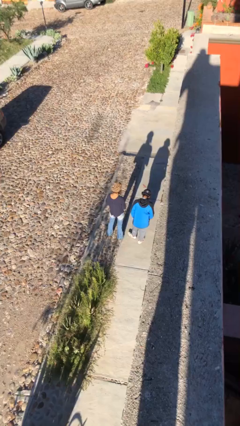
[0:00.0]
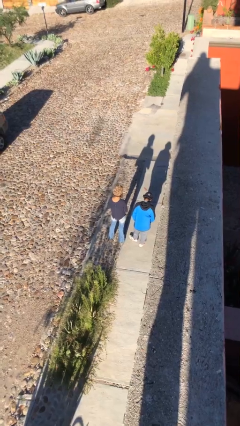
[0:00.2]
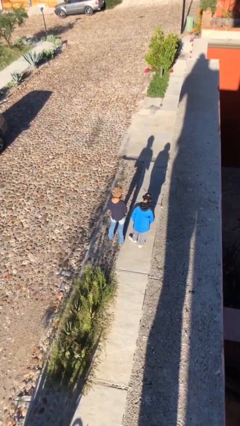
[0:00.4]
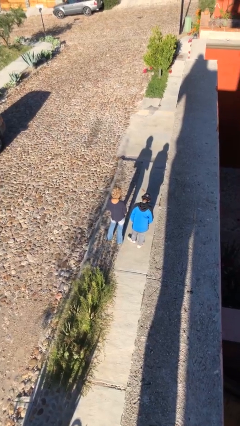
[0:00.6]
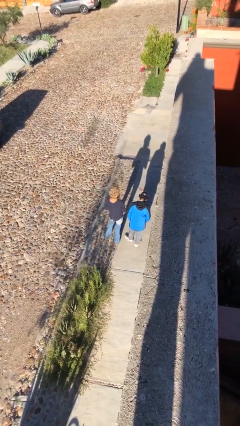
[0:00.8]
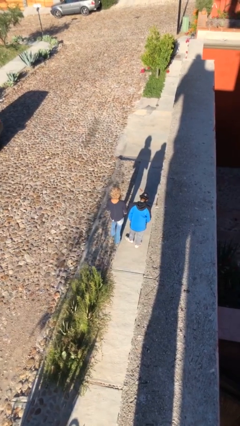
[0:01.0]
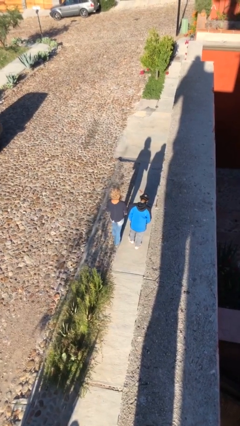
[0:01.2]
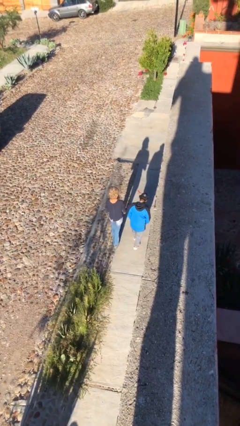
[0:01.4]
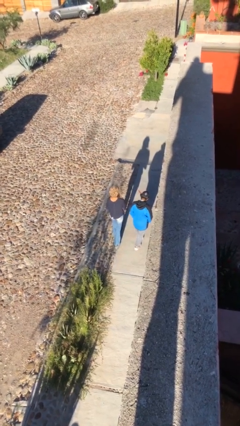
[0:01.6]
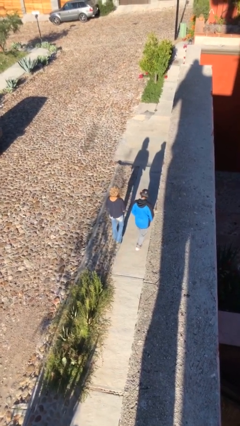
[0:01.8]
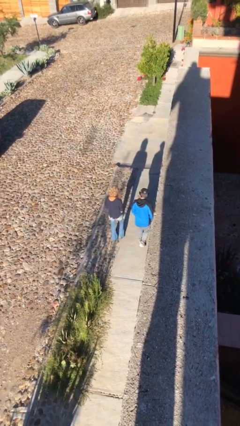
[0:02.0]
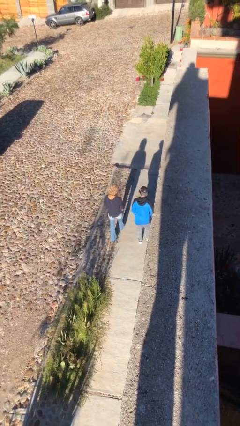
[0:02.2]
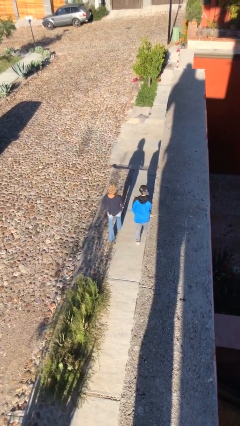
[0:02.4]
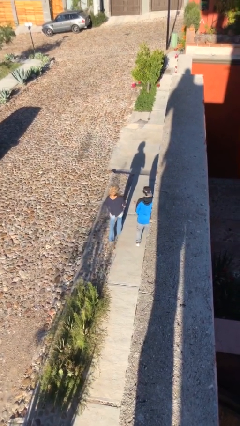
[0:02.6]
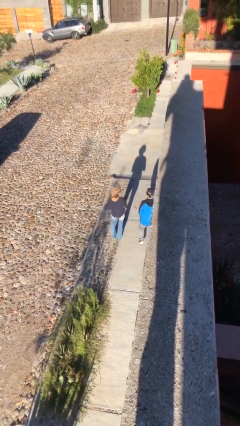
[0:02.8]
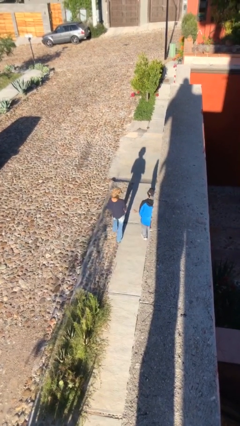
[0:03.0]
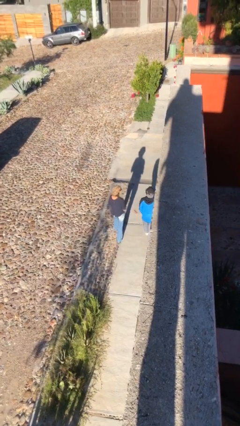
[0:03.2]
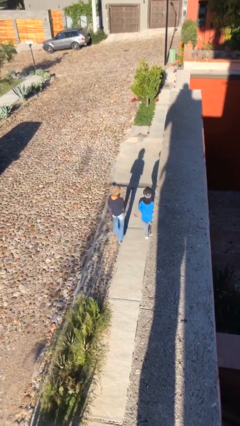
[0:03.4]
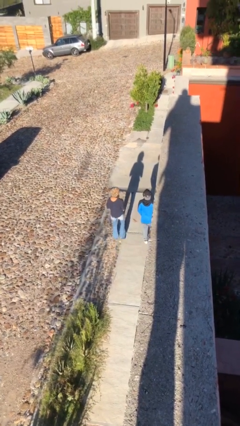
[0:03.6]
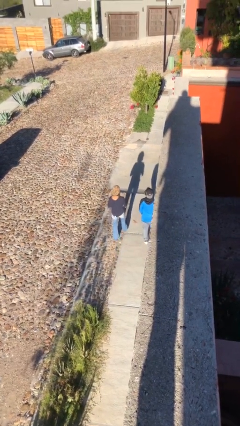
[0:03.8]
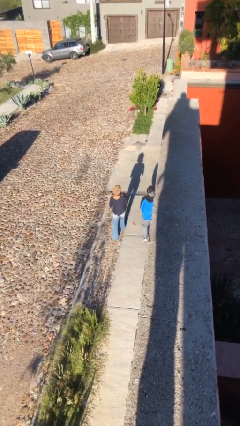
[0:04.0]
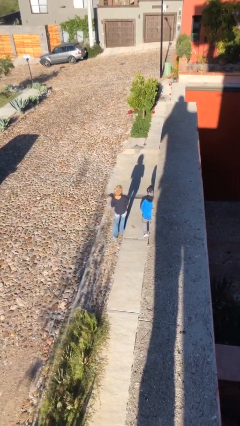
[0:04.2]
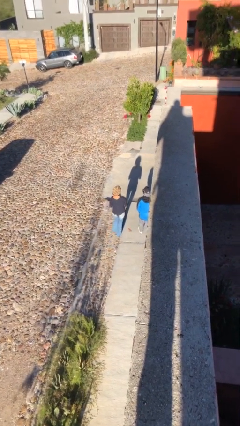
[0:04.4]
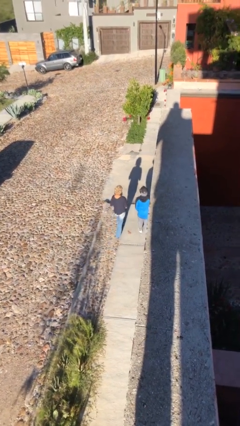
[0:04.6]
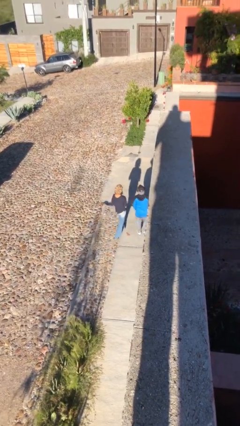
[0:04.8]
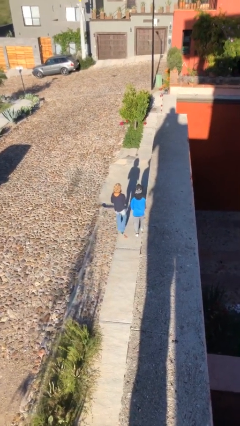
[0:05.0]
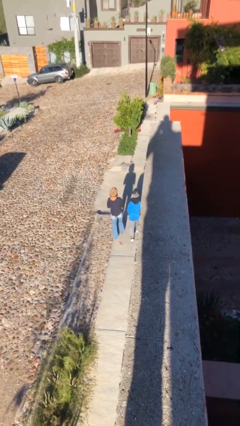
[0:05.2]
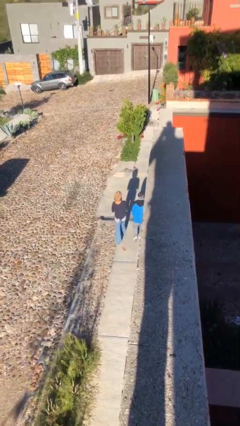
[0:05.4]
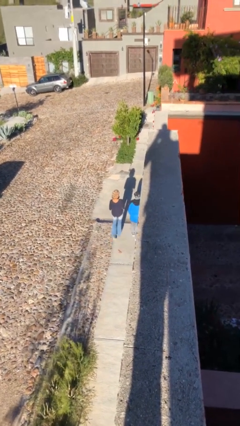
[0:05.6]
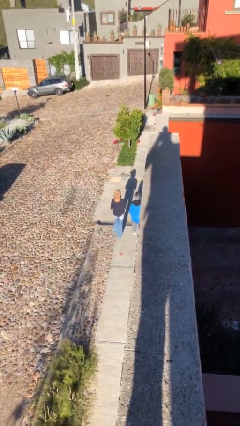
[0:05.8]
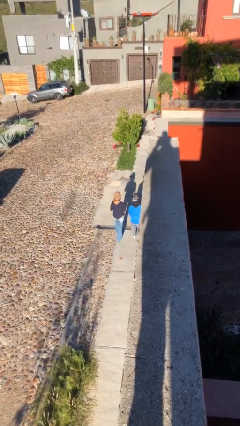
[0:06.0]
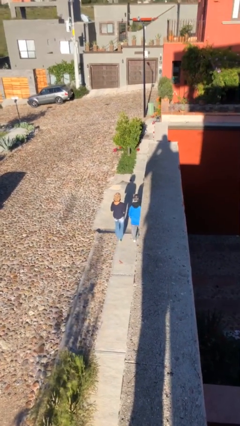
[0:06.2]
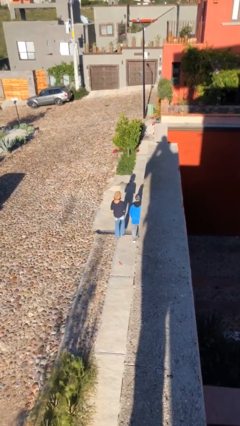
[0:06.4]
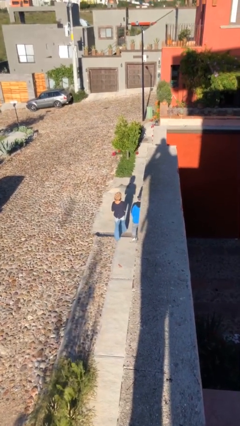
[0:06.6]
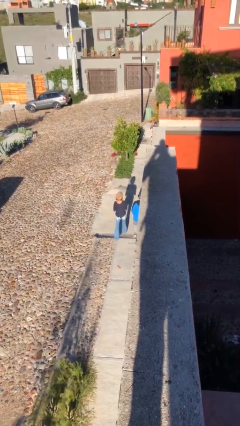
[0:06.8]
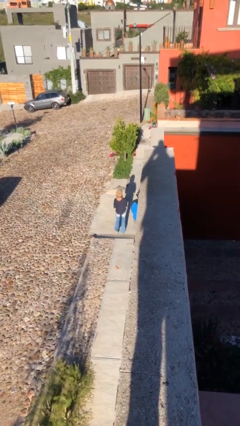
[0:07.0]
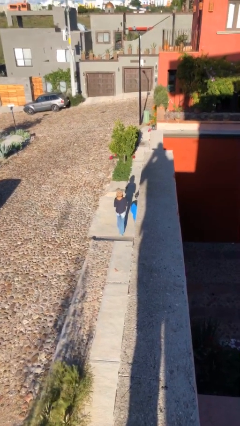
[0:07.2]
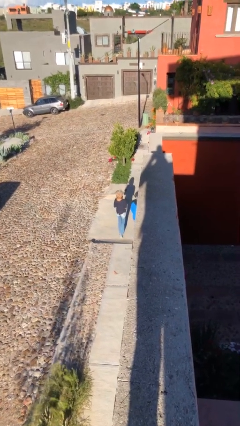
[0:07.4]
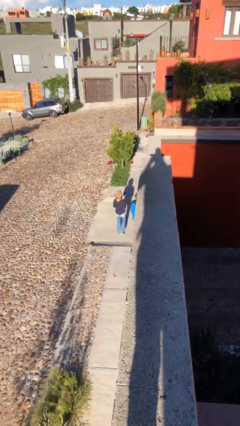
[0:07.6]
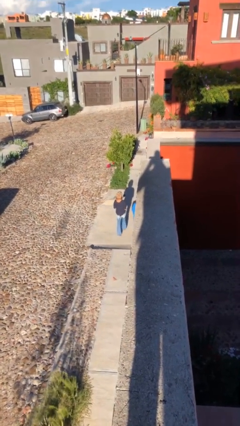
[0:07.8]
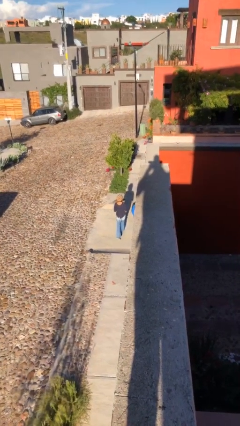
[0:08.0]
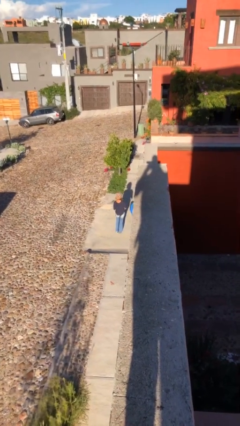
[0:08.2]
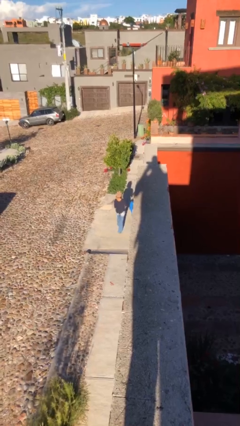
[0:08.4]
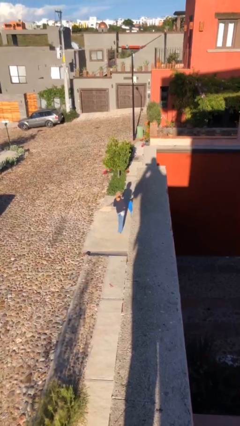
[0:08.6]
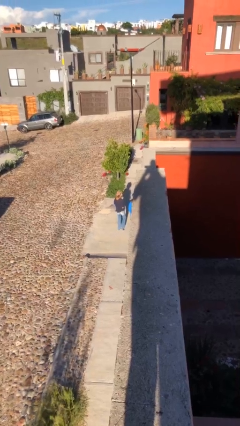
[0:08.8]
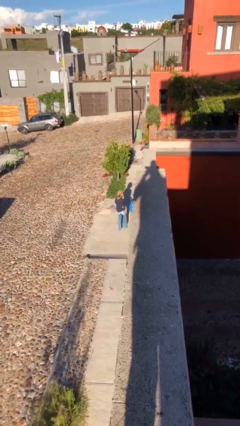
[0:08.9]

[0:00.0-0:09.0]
person talks to person

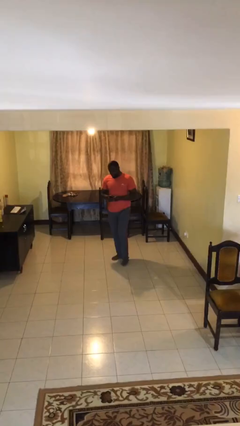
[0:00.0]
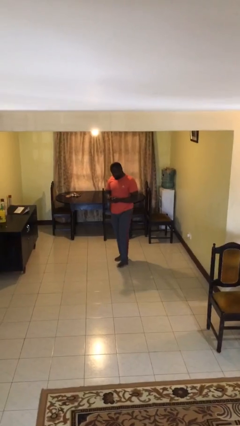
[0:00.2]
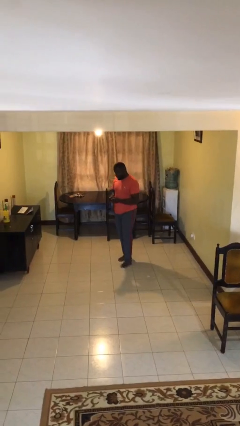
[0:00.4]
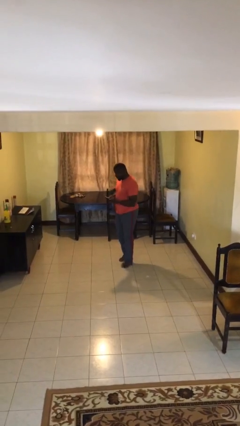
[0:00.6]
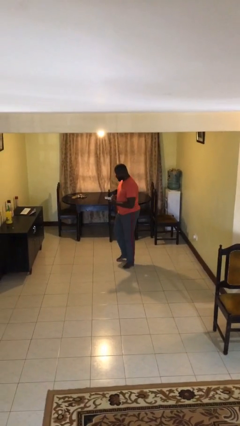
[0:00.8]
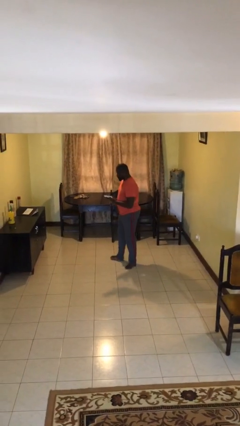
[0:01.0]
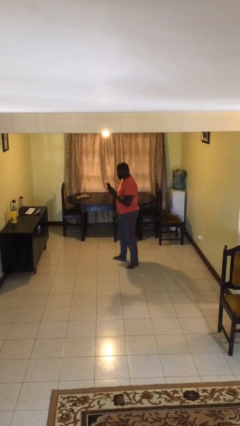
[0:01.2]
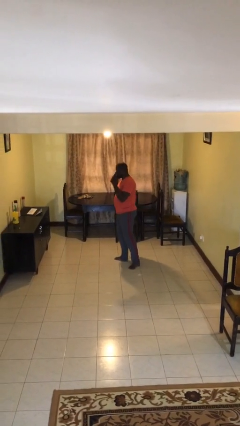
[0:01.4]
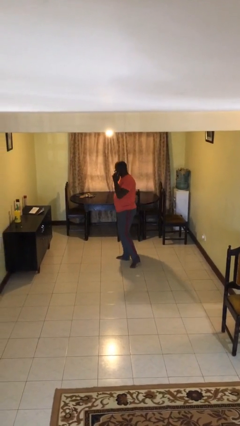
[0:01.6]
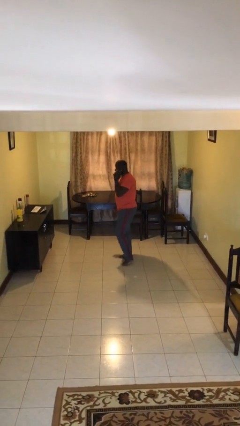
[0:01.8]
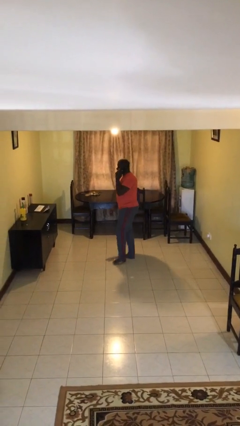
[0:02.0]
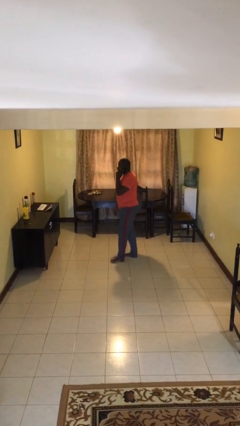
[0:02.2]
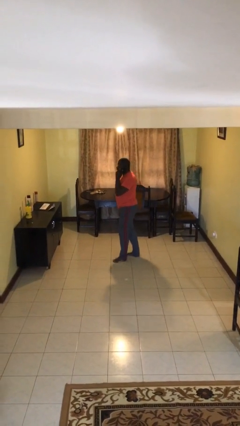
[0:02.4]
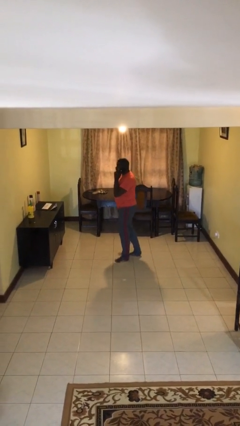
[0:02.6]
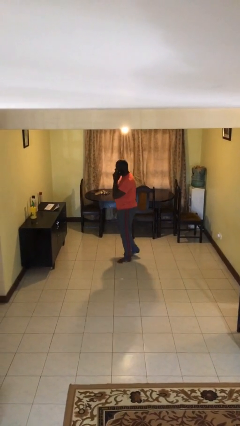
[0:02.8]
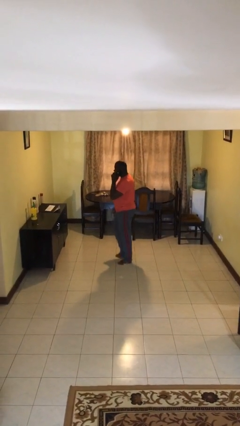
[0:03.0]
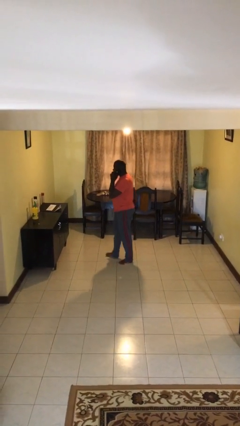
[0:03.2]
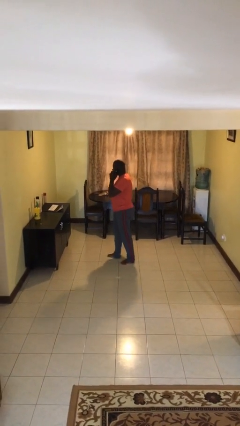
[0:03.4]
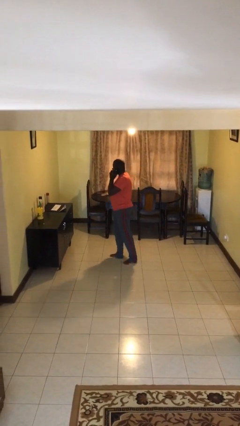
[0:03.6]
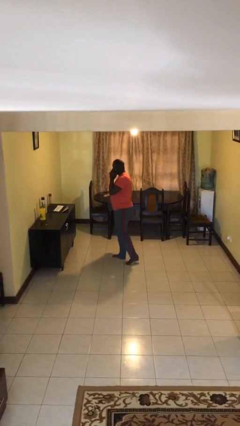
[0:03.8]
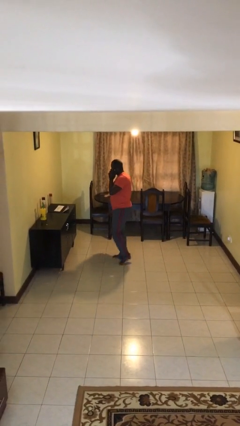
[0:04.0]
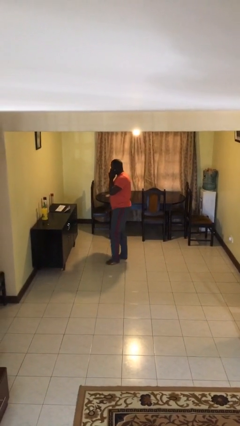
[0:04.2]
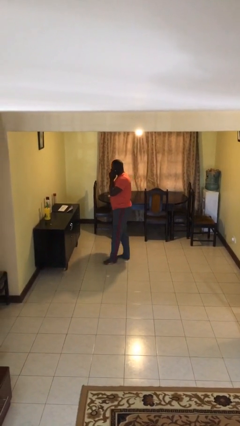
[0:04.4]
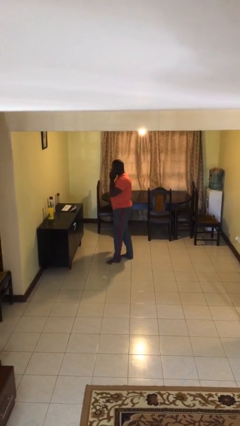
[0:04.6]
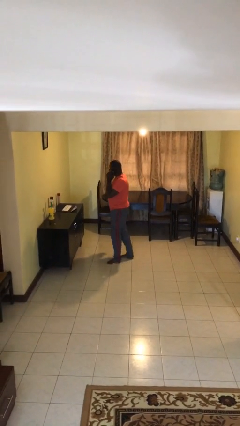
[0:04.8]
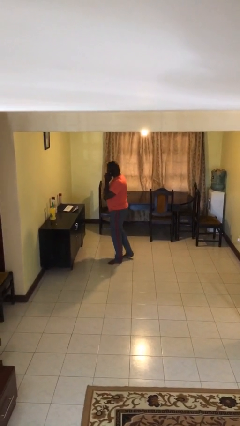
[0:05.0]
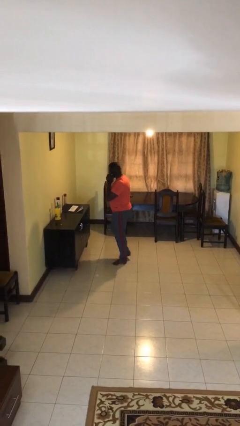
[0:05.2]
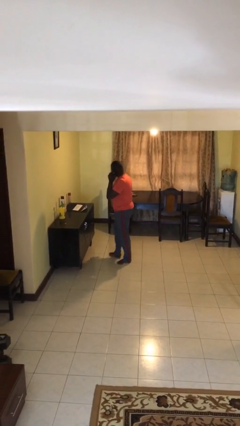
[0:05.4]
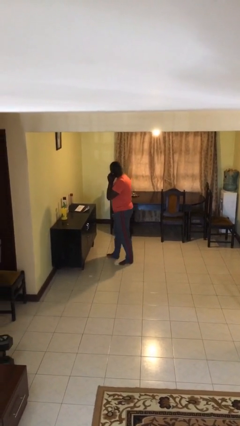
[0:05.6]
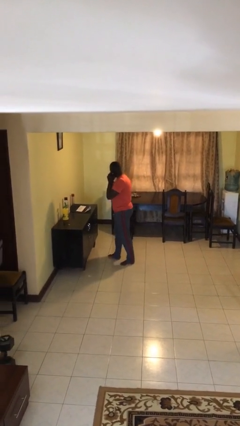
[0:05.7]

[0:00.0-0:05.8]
person talks on phone

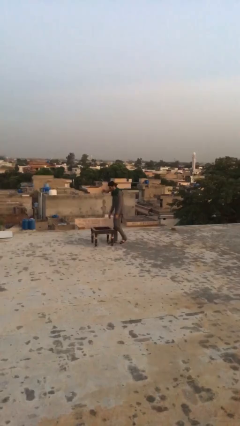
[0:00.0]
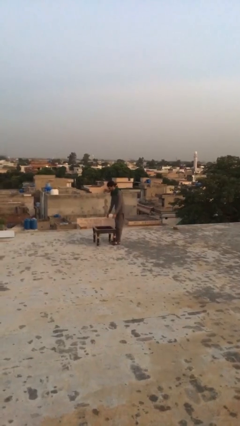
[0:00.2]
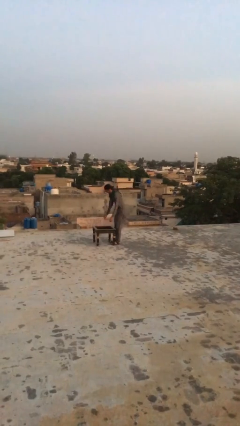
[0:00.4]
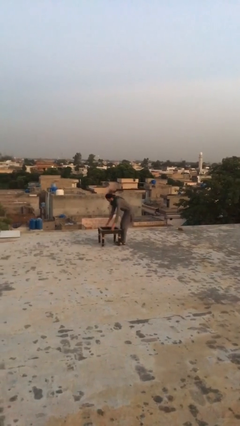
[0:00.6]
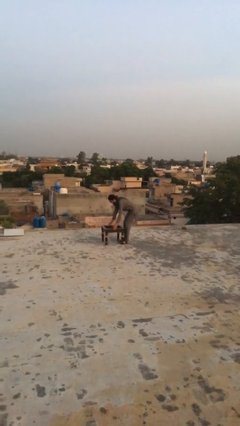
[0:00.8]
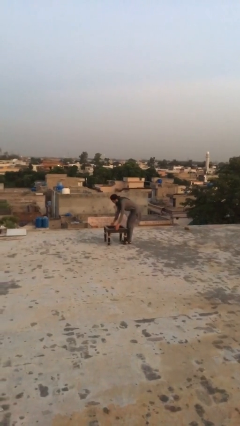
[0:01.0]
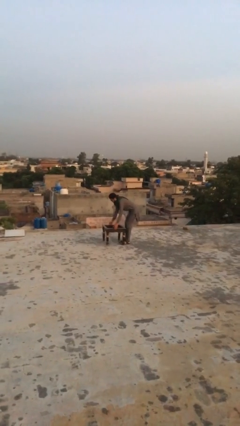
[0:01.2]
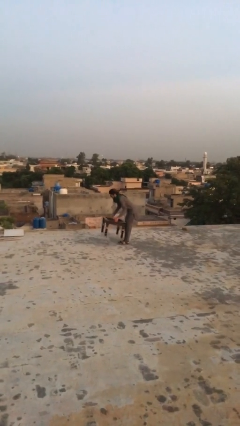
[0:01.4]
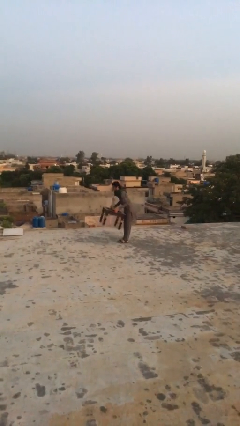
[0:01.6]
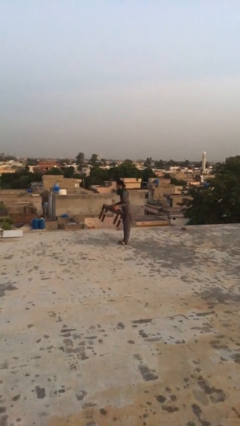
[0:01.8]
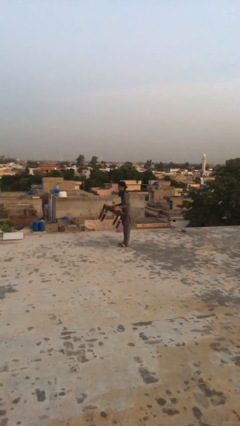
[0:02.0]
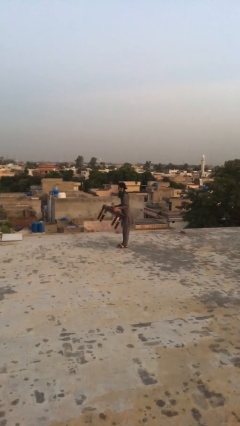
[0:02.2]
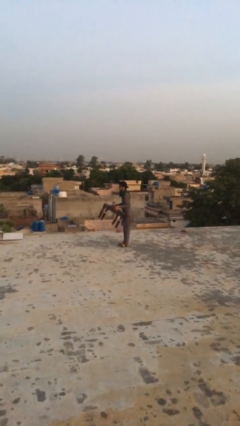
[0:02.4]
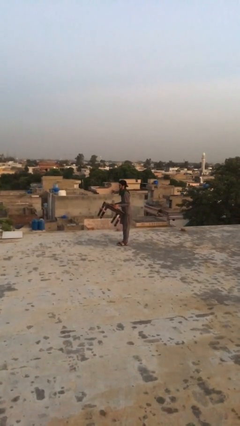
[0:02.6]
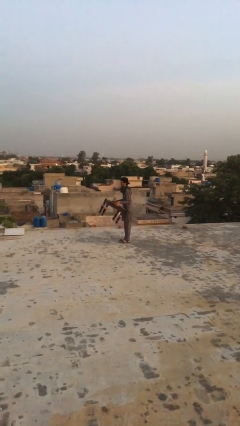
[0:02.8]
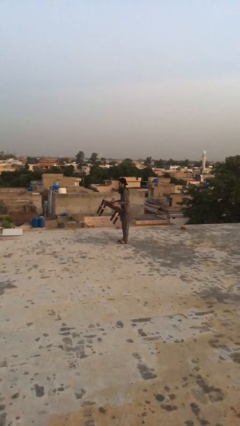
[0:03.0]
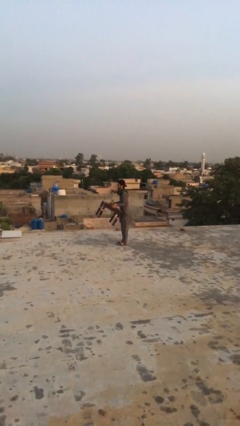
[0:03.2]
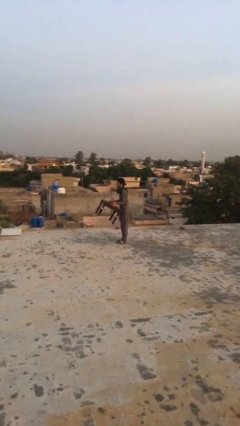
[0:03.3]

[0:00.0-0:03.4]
person picks up object from floor
